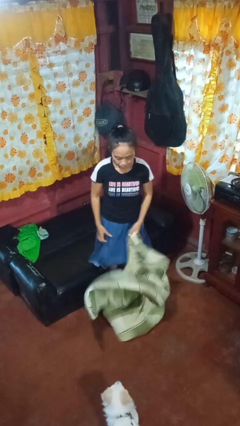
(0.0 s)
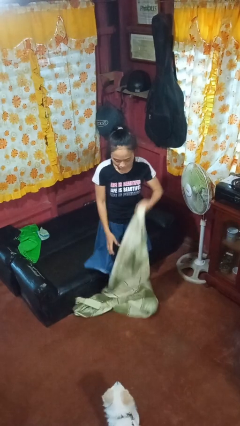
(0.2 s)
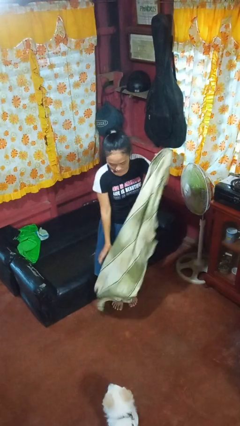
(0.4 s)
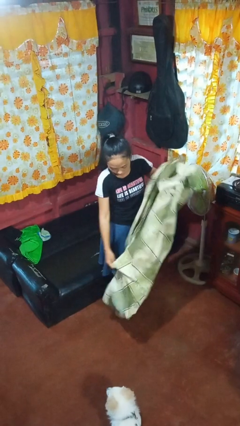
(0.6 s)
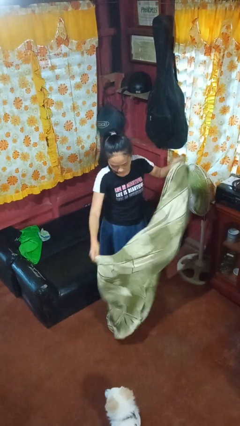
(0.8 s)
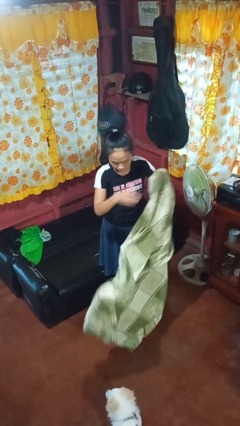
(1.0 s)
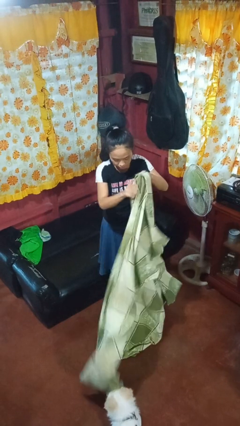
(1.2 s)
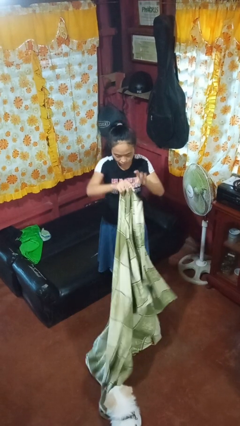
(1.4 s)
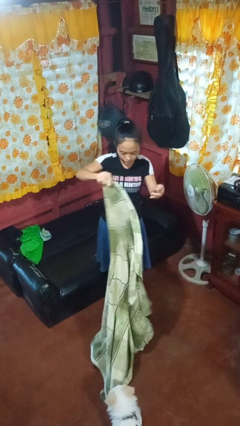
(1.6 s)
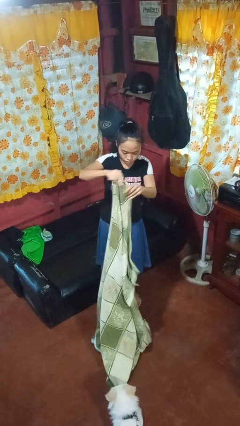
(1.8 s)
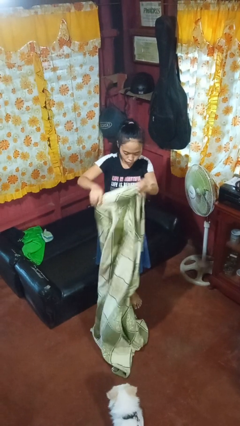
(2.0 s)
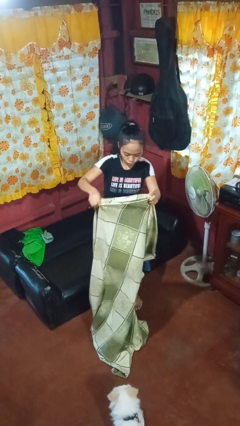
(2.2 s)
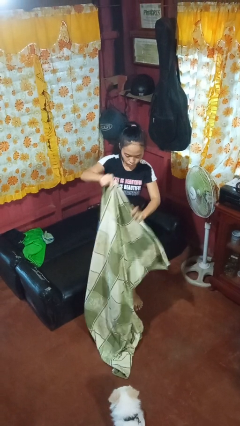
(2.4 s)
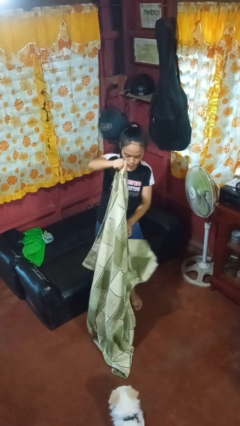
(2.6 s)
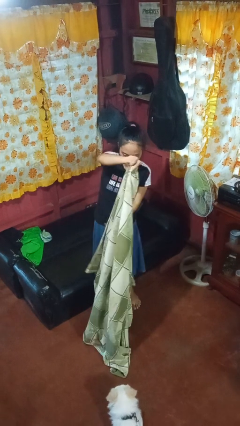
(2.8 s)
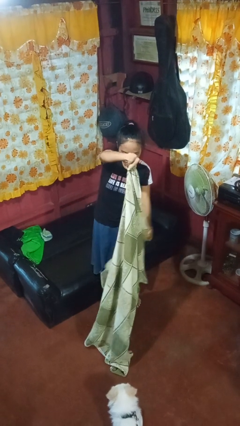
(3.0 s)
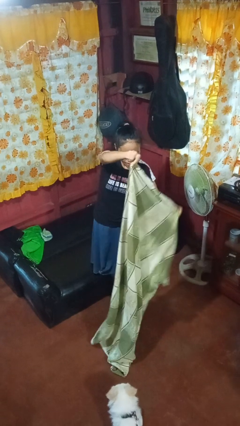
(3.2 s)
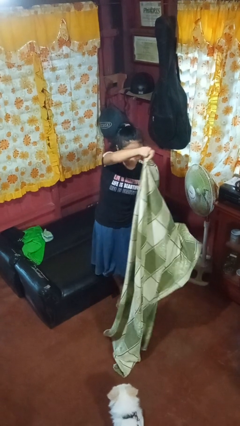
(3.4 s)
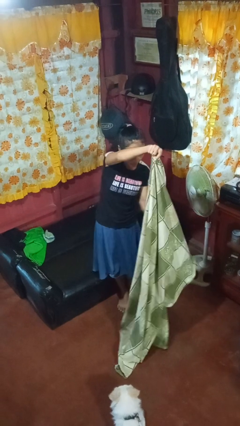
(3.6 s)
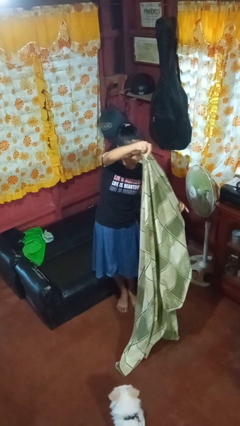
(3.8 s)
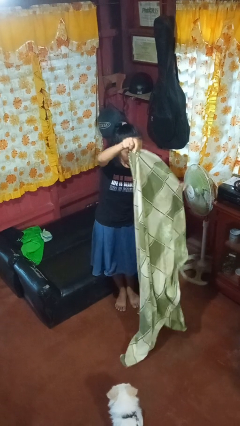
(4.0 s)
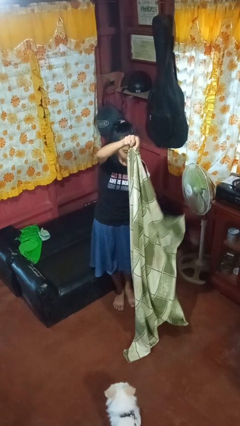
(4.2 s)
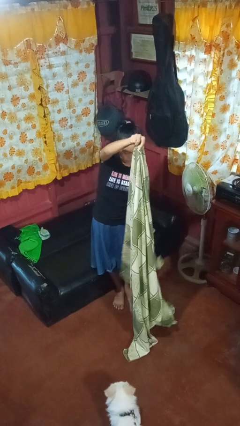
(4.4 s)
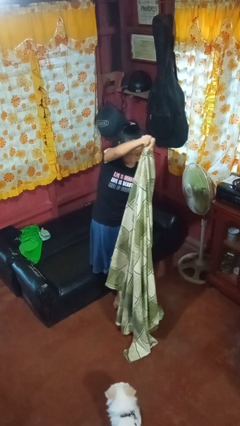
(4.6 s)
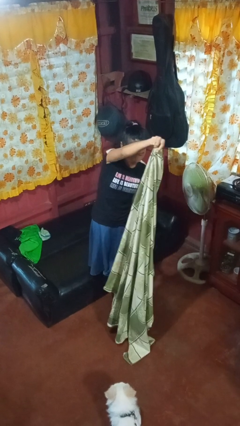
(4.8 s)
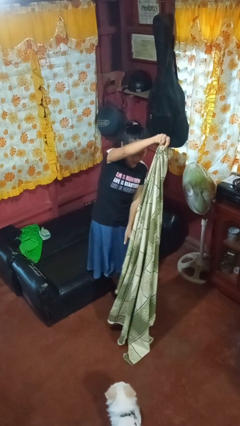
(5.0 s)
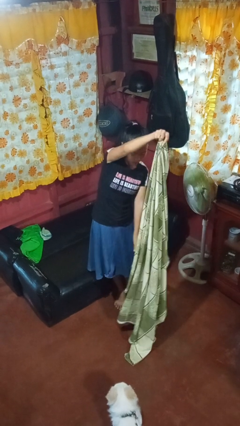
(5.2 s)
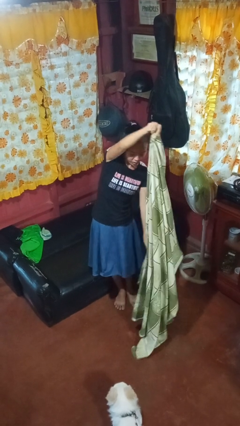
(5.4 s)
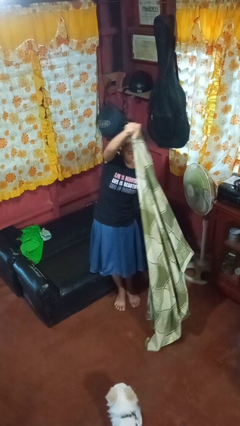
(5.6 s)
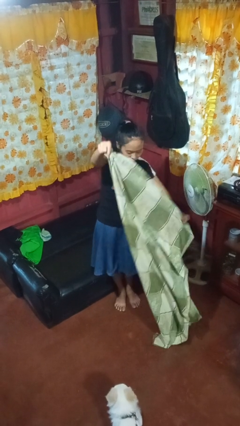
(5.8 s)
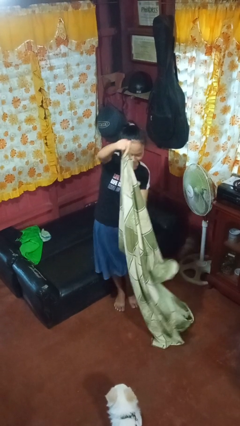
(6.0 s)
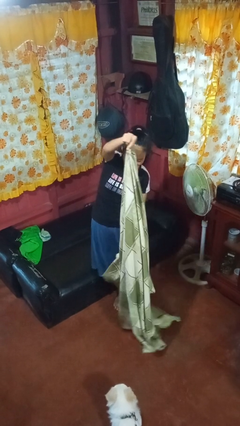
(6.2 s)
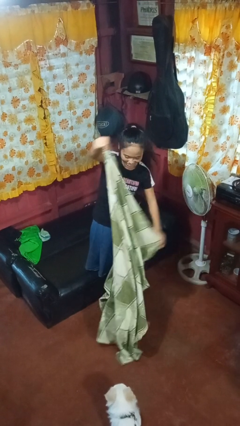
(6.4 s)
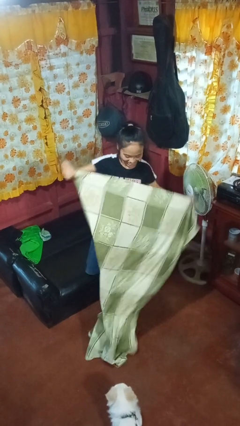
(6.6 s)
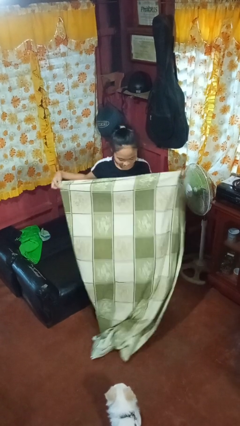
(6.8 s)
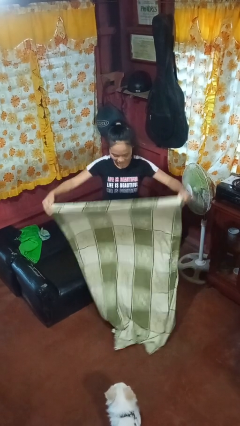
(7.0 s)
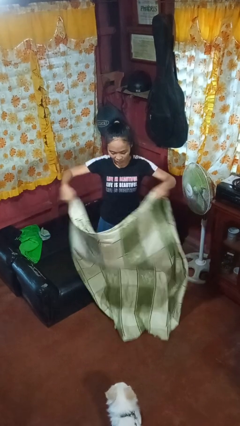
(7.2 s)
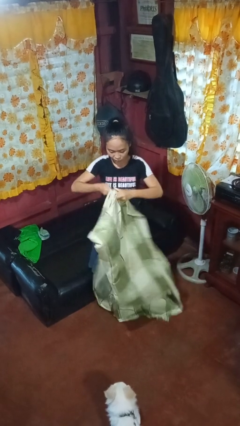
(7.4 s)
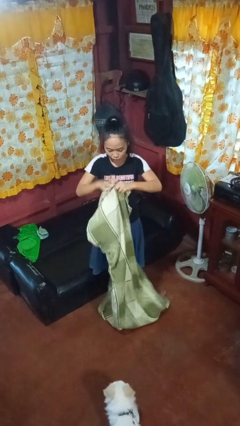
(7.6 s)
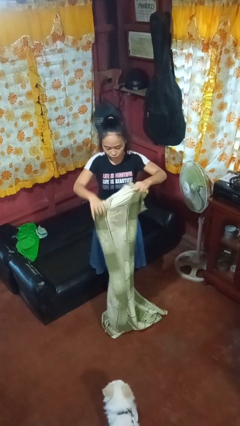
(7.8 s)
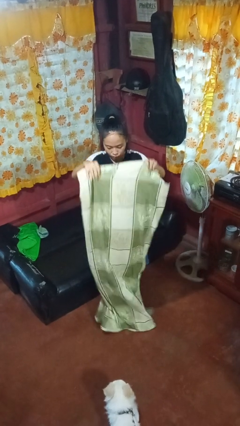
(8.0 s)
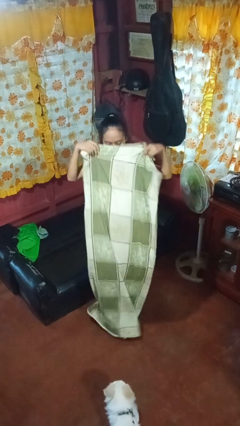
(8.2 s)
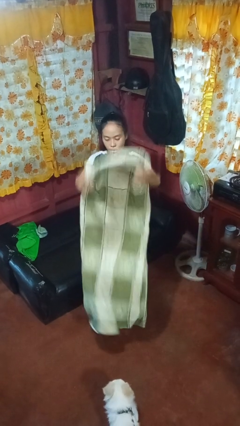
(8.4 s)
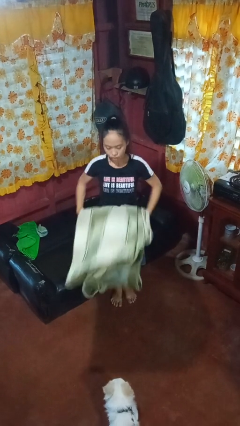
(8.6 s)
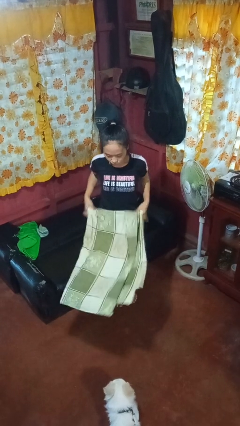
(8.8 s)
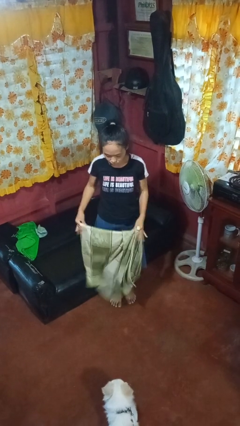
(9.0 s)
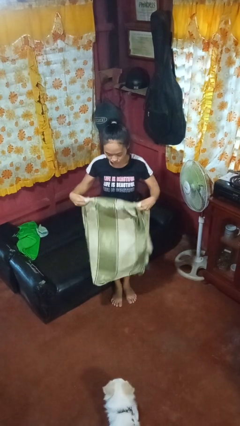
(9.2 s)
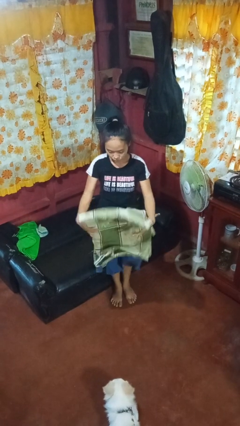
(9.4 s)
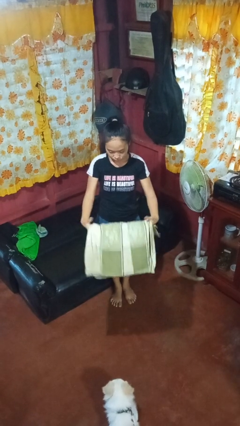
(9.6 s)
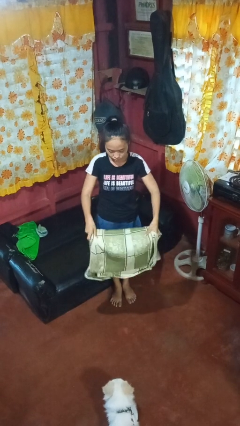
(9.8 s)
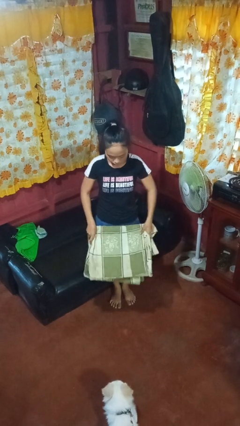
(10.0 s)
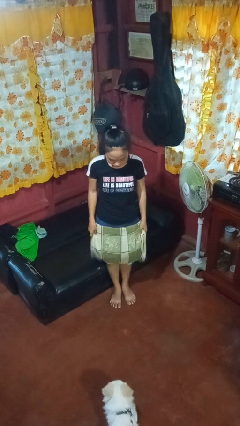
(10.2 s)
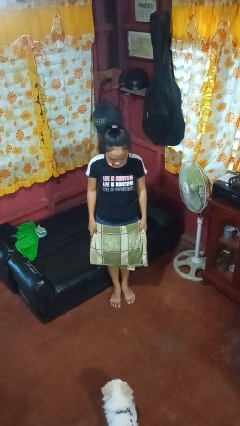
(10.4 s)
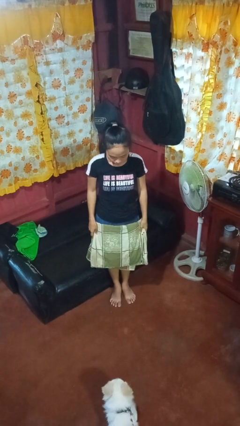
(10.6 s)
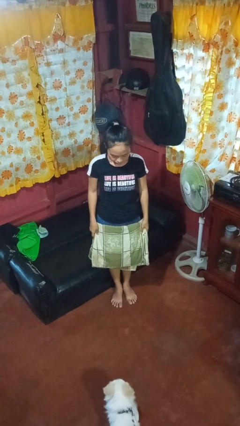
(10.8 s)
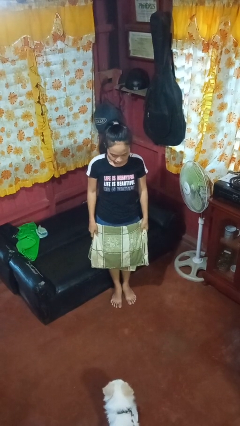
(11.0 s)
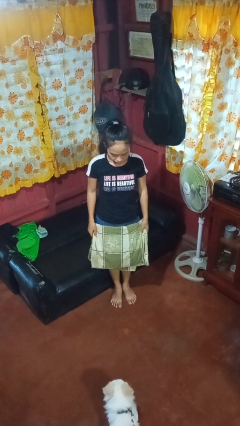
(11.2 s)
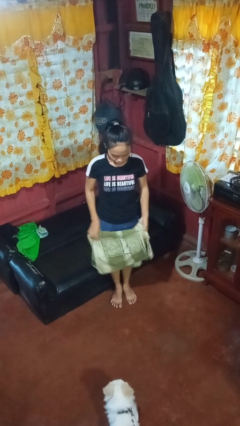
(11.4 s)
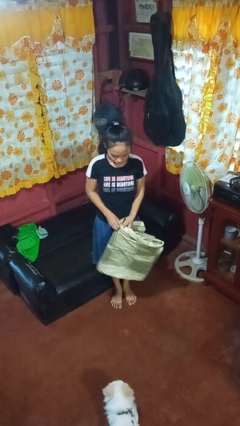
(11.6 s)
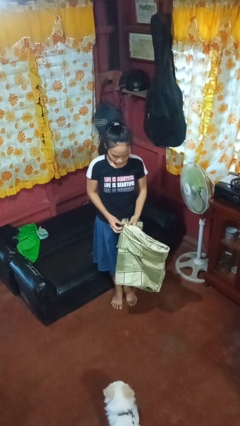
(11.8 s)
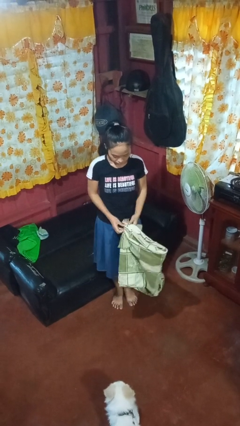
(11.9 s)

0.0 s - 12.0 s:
person folds blanket

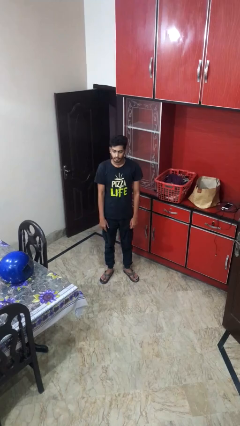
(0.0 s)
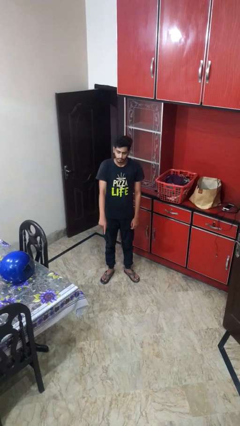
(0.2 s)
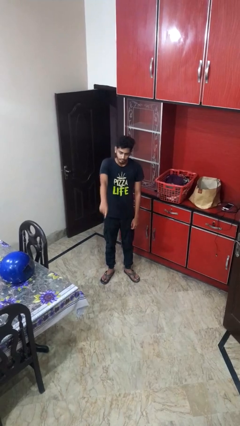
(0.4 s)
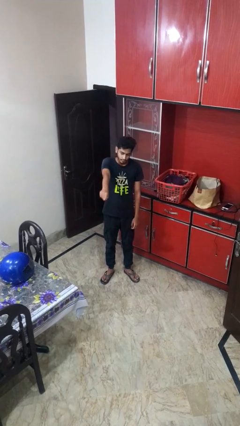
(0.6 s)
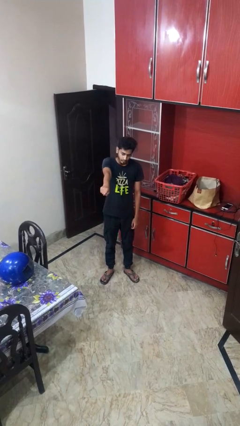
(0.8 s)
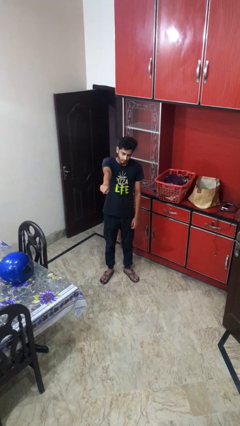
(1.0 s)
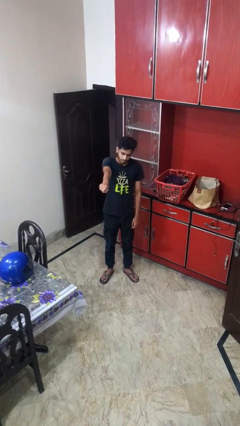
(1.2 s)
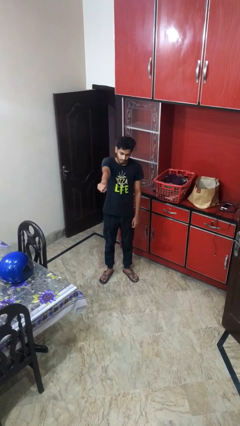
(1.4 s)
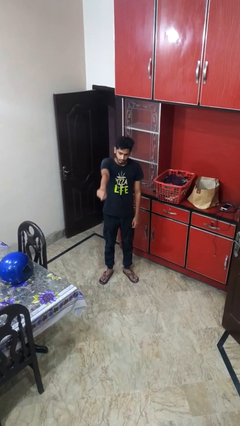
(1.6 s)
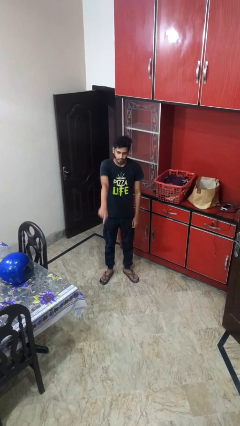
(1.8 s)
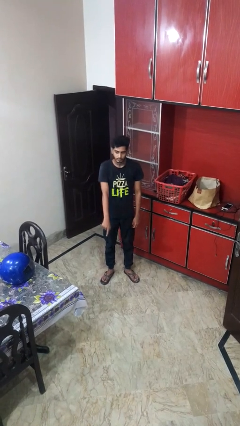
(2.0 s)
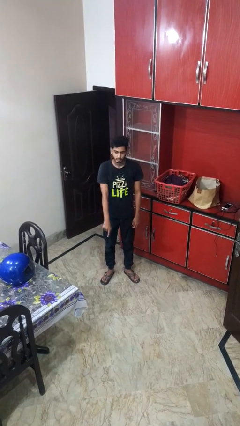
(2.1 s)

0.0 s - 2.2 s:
person points at person

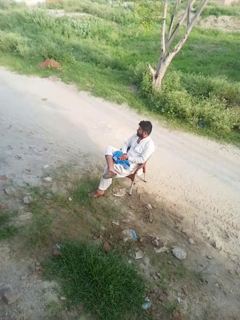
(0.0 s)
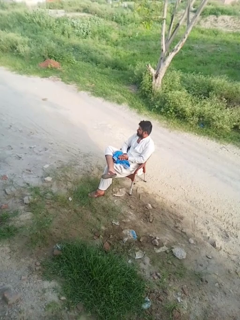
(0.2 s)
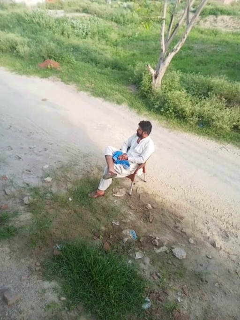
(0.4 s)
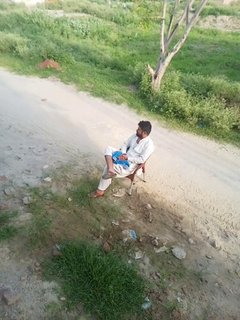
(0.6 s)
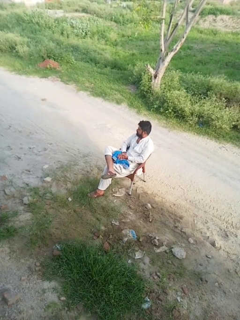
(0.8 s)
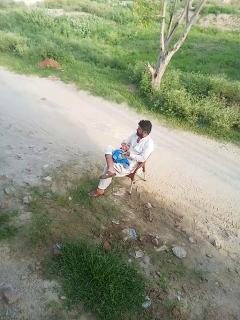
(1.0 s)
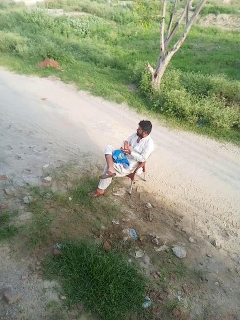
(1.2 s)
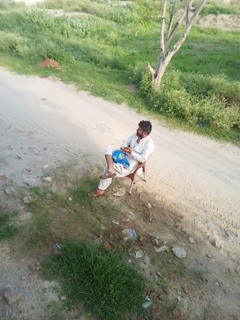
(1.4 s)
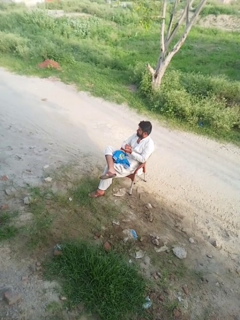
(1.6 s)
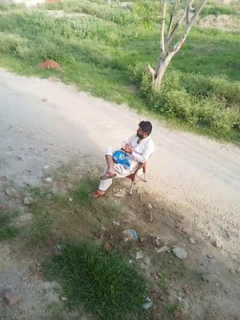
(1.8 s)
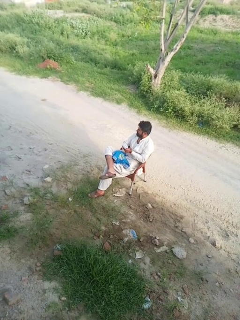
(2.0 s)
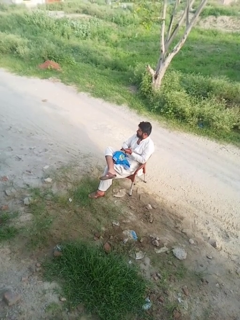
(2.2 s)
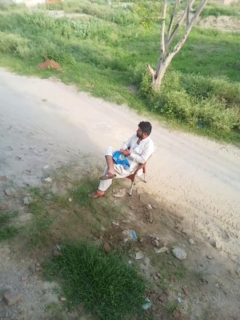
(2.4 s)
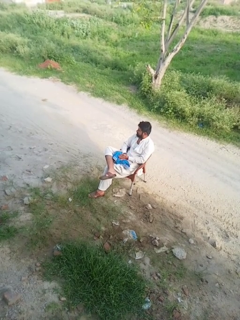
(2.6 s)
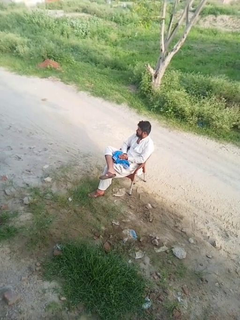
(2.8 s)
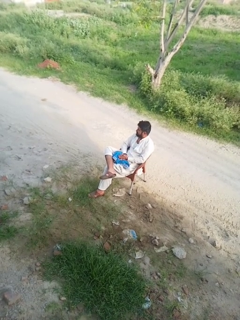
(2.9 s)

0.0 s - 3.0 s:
person claps hands

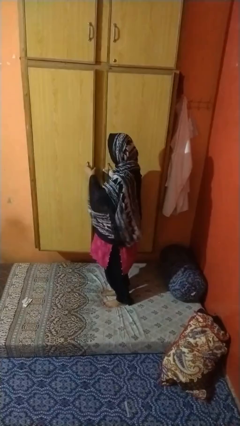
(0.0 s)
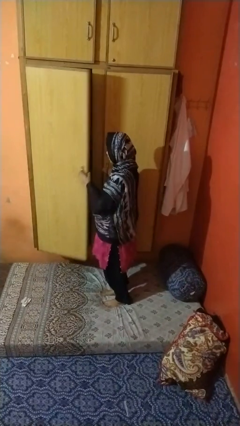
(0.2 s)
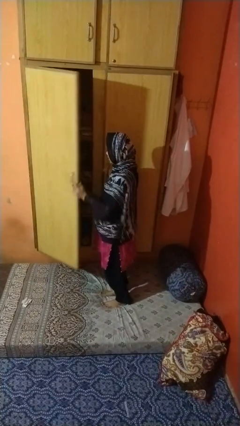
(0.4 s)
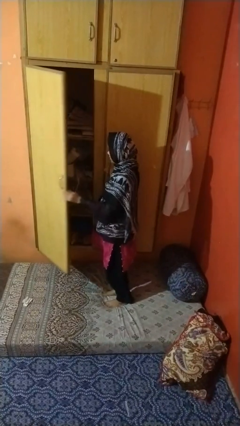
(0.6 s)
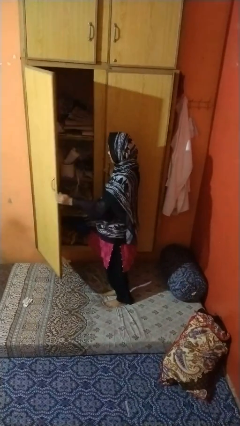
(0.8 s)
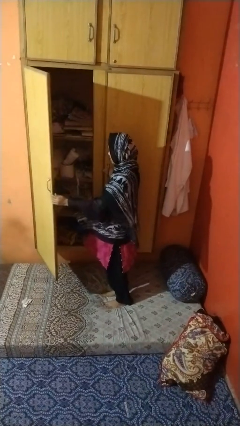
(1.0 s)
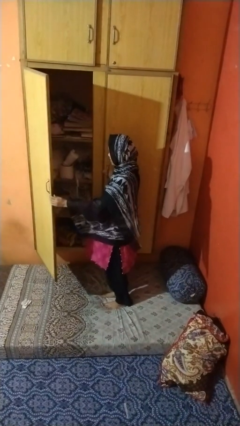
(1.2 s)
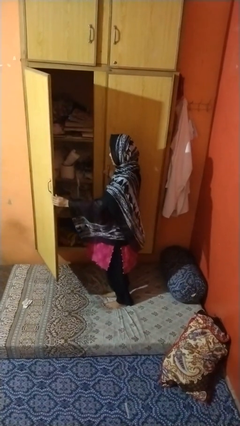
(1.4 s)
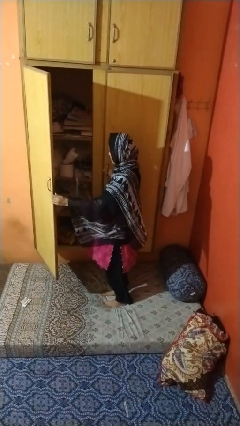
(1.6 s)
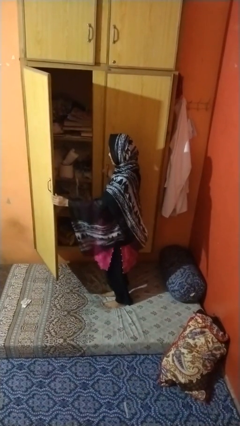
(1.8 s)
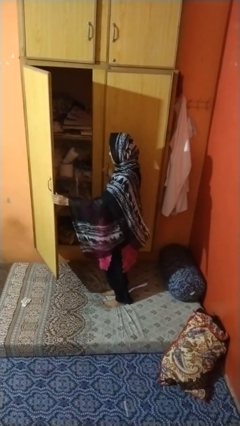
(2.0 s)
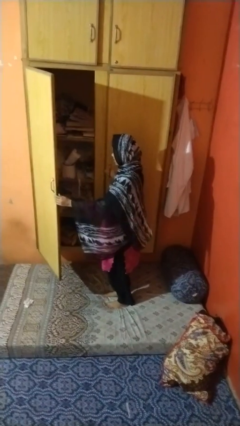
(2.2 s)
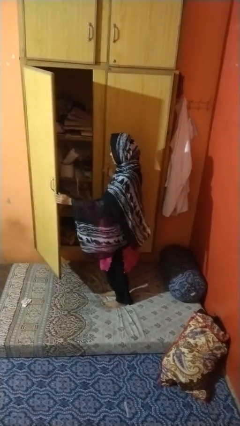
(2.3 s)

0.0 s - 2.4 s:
person opens closet door
